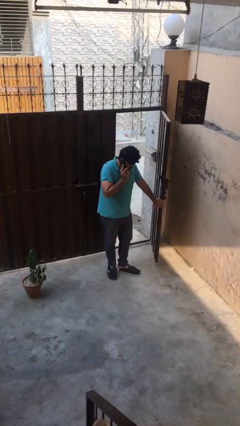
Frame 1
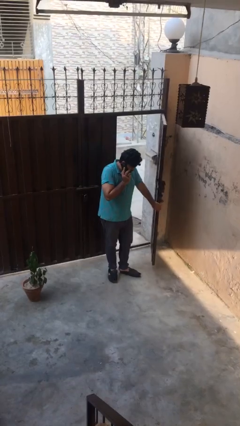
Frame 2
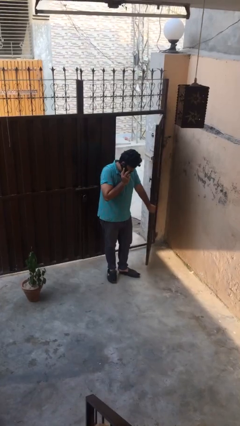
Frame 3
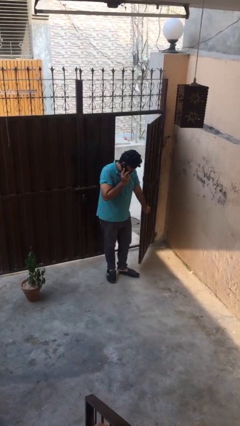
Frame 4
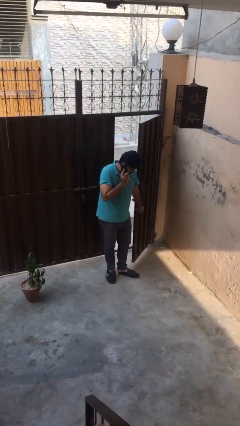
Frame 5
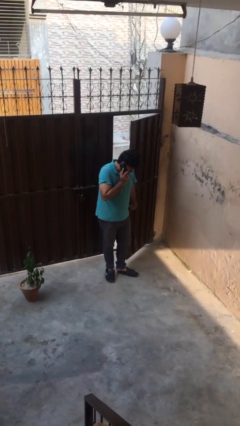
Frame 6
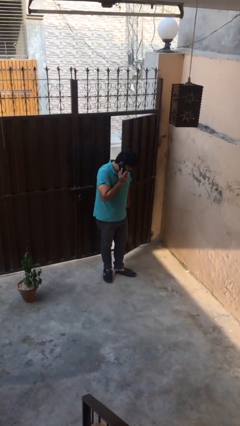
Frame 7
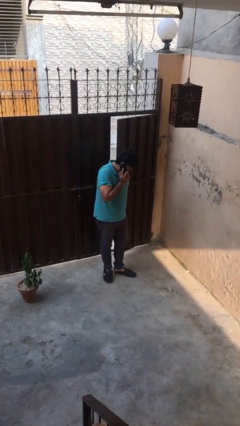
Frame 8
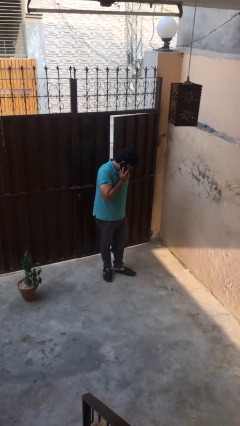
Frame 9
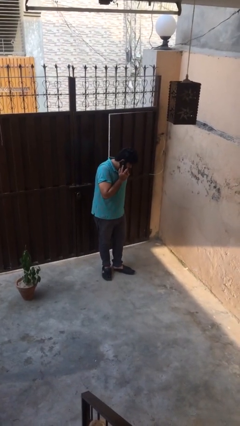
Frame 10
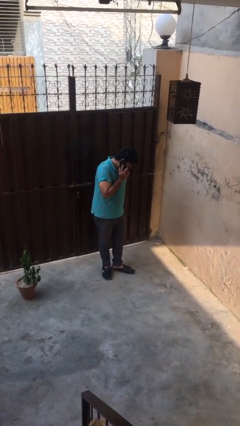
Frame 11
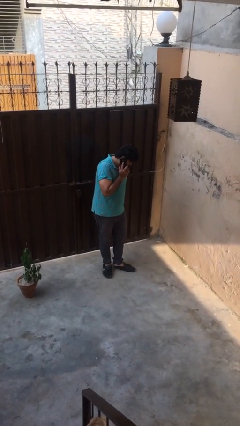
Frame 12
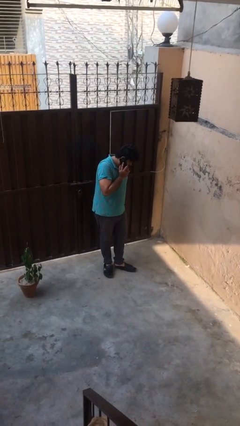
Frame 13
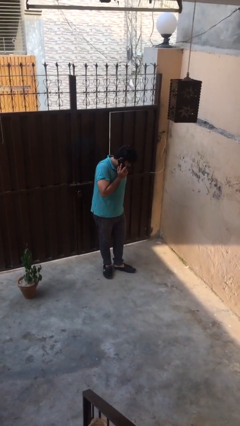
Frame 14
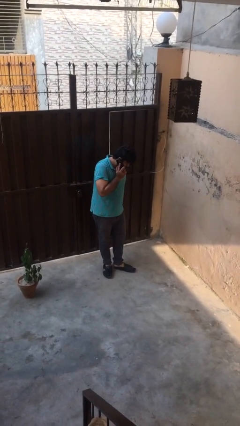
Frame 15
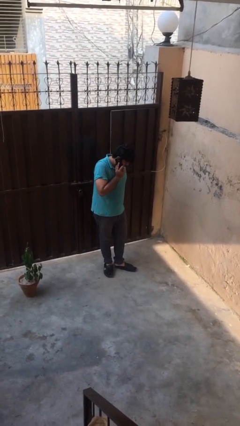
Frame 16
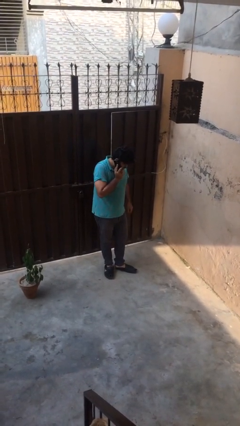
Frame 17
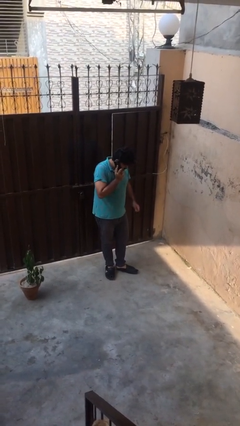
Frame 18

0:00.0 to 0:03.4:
person closes facility door

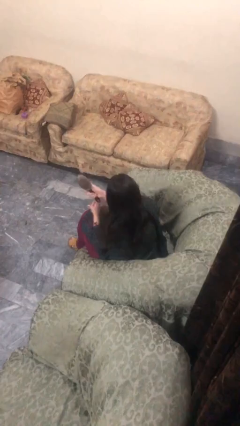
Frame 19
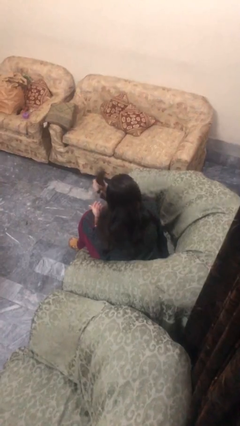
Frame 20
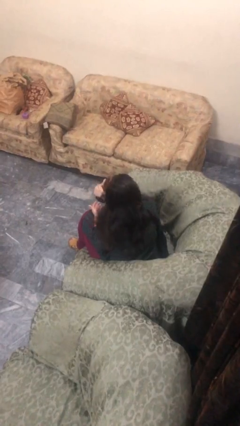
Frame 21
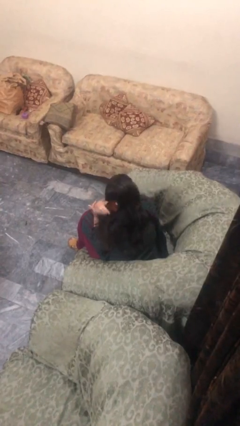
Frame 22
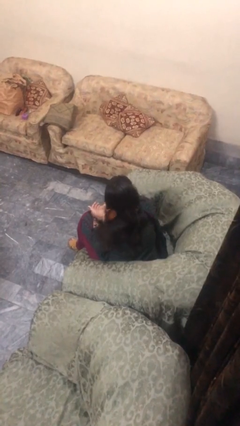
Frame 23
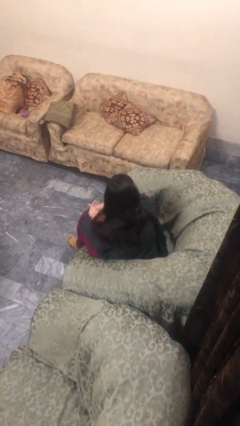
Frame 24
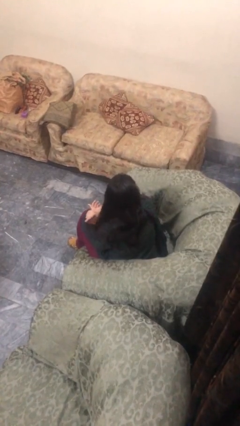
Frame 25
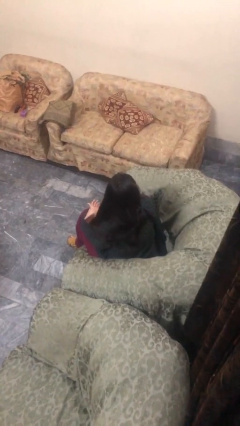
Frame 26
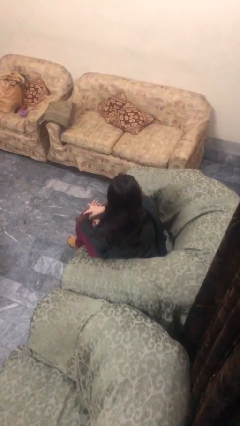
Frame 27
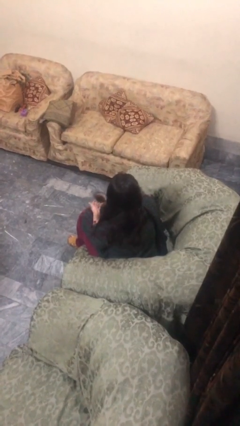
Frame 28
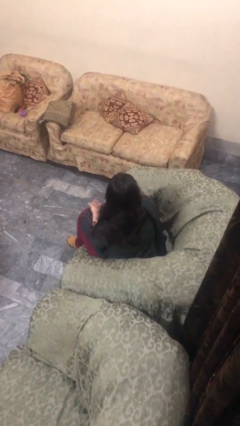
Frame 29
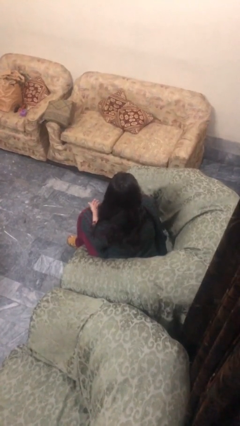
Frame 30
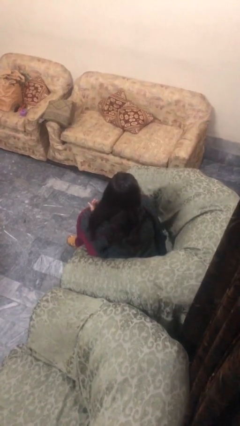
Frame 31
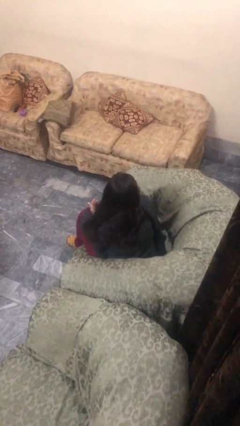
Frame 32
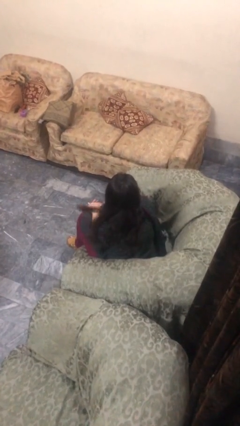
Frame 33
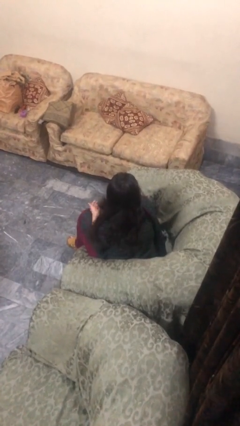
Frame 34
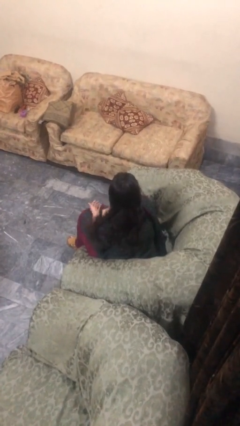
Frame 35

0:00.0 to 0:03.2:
person brushes hair

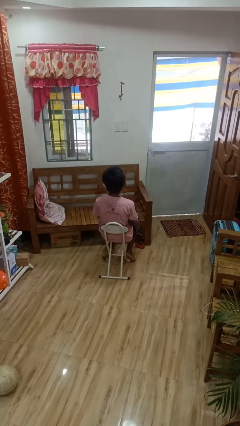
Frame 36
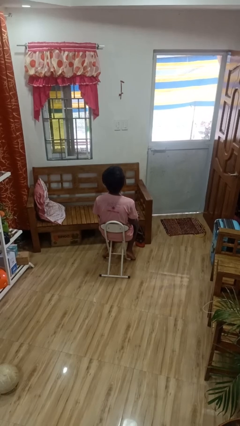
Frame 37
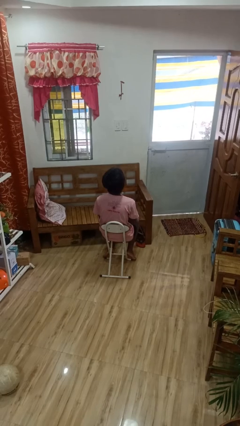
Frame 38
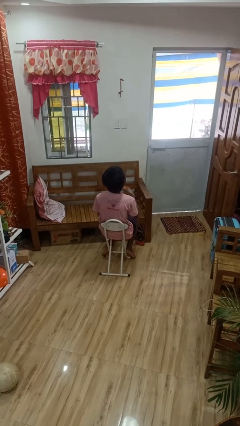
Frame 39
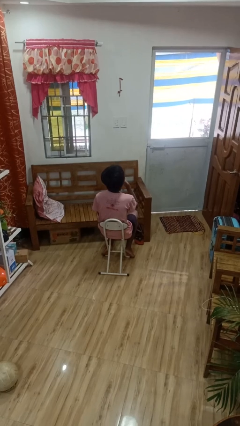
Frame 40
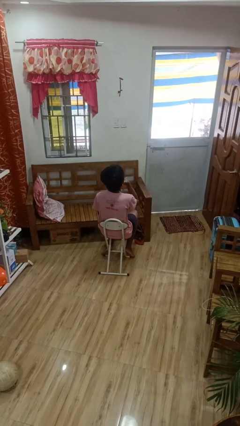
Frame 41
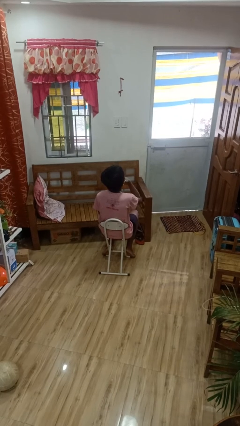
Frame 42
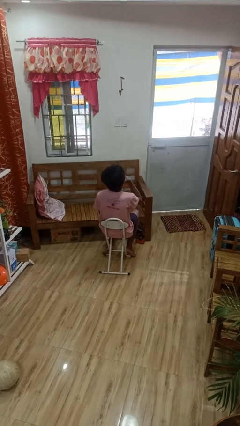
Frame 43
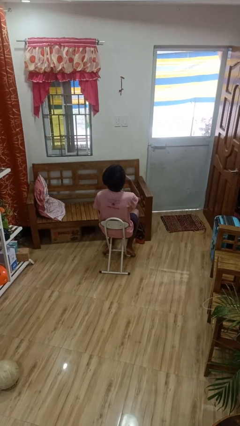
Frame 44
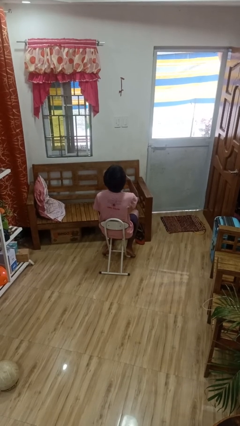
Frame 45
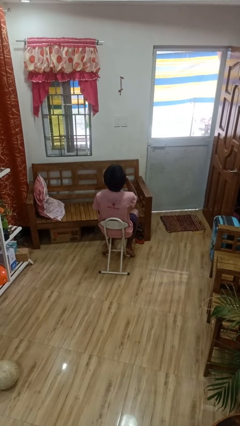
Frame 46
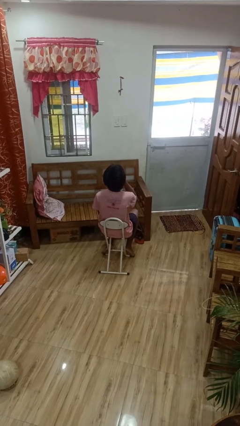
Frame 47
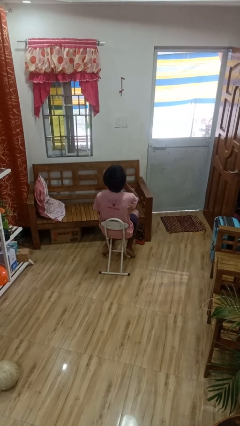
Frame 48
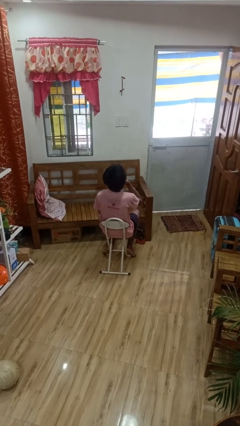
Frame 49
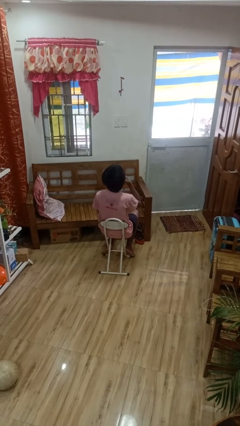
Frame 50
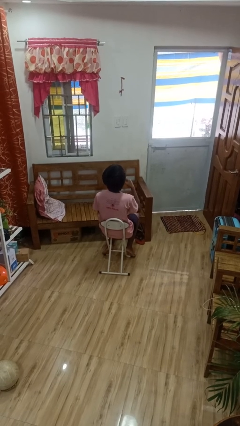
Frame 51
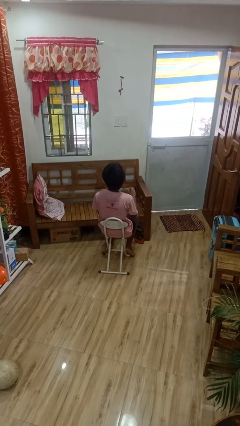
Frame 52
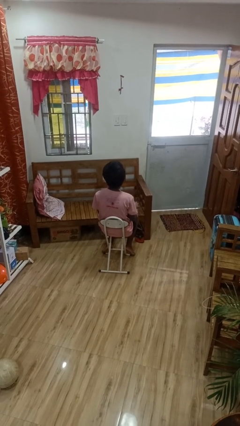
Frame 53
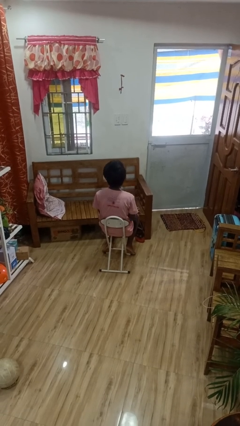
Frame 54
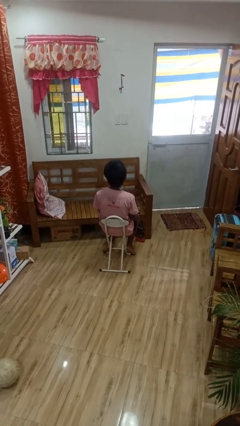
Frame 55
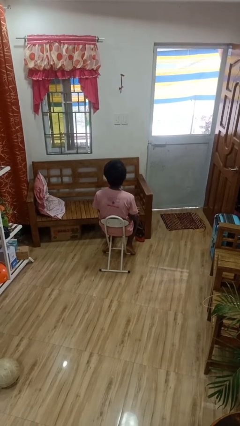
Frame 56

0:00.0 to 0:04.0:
person strokes chin

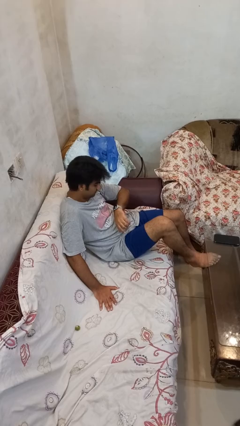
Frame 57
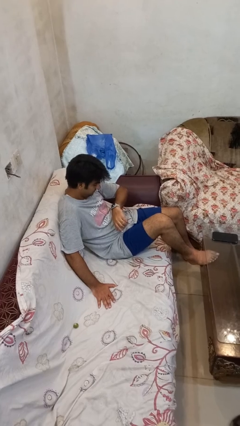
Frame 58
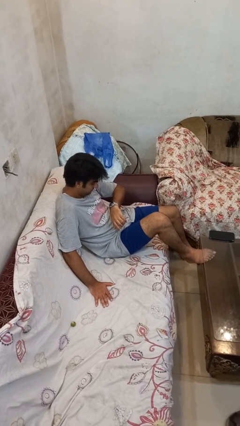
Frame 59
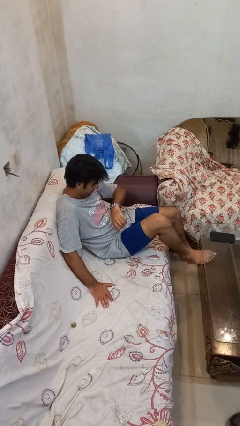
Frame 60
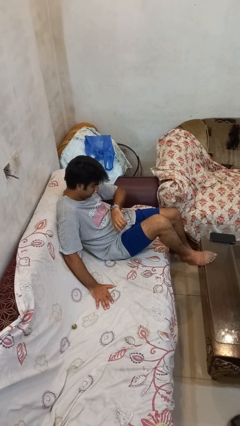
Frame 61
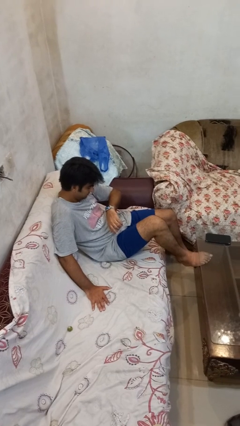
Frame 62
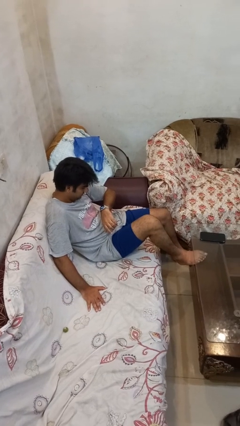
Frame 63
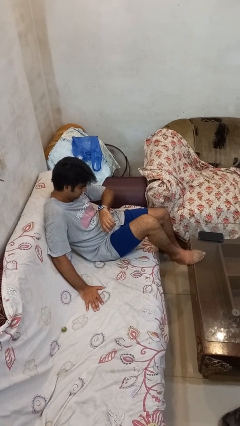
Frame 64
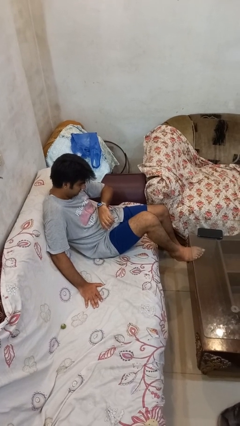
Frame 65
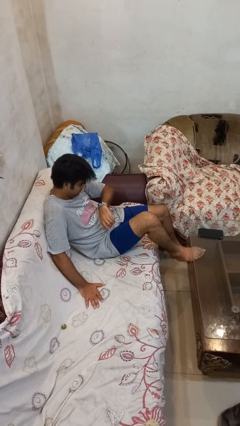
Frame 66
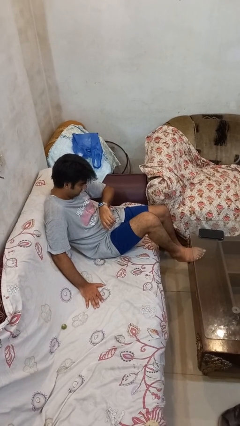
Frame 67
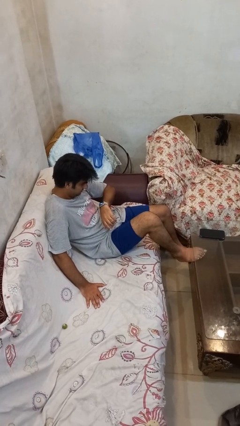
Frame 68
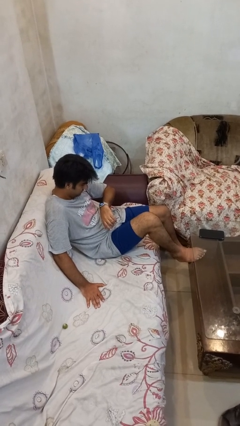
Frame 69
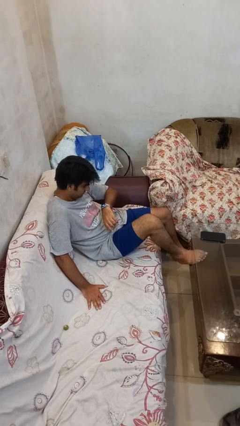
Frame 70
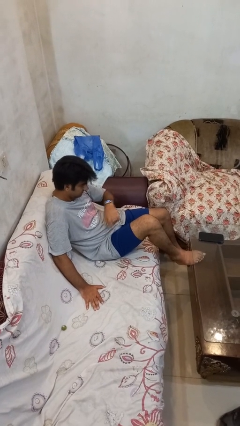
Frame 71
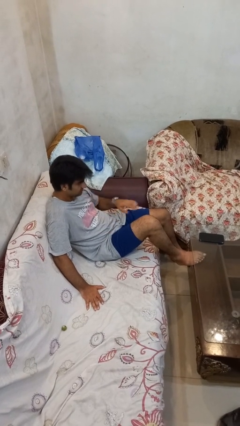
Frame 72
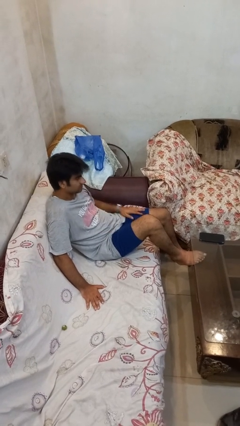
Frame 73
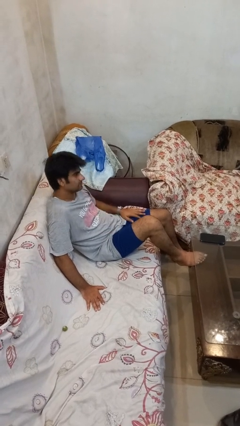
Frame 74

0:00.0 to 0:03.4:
person looks at wristwatch

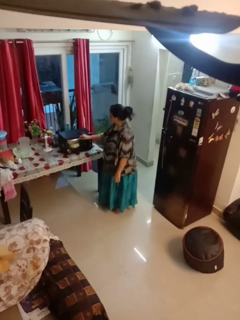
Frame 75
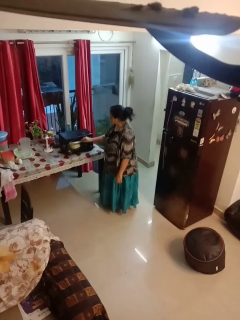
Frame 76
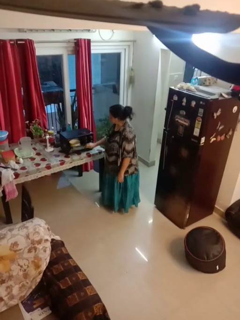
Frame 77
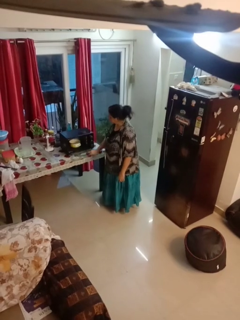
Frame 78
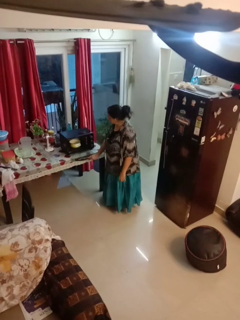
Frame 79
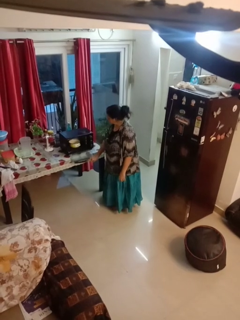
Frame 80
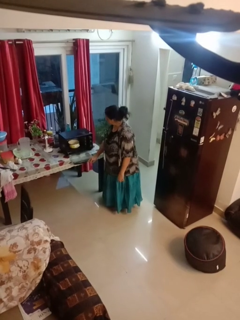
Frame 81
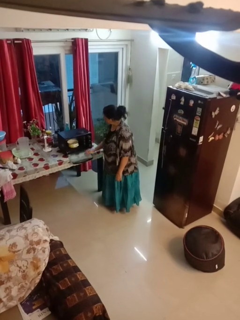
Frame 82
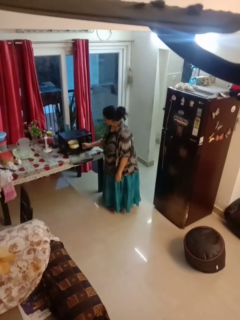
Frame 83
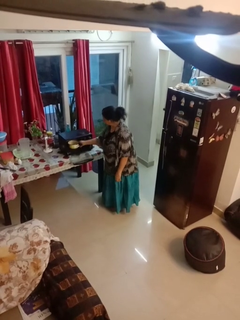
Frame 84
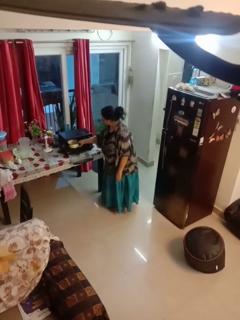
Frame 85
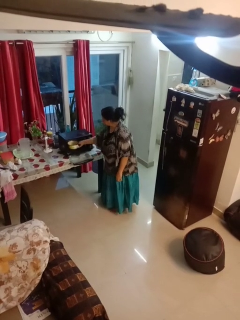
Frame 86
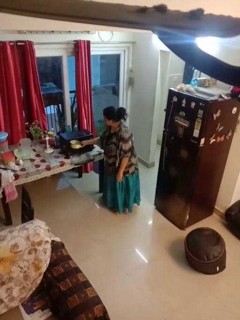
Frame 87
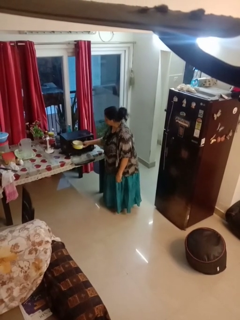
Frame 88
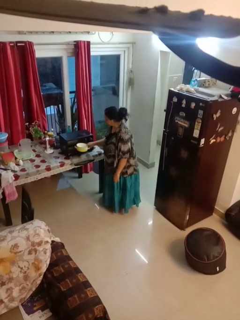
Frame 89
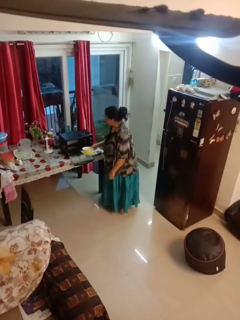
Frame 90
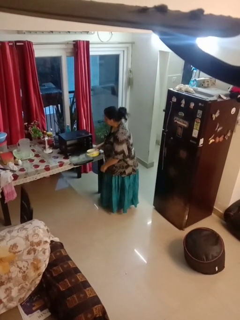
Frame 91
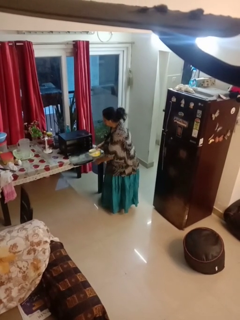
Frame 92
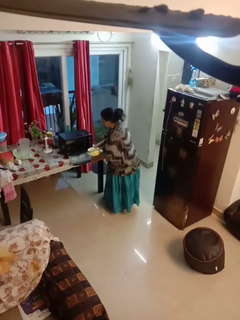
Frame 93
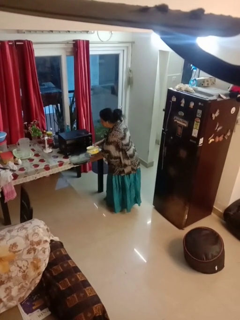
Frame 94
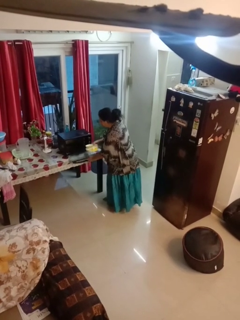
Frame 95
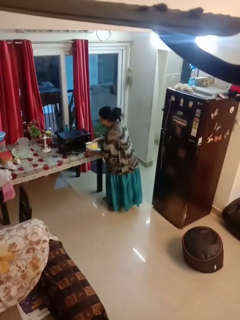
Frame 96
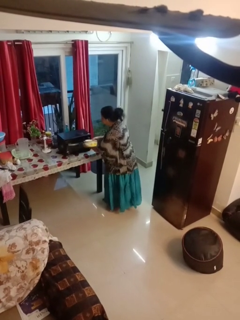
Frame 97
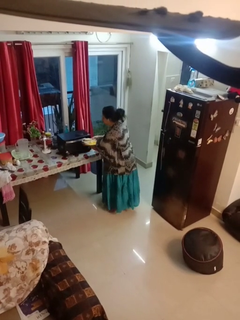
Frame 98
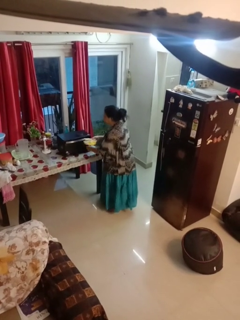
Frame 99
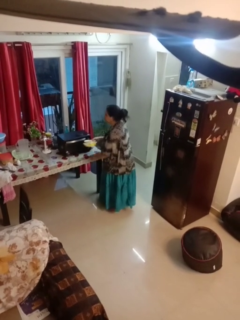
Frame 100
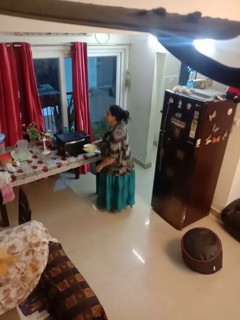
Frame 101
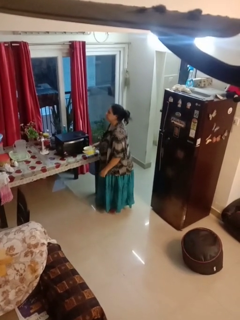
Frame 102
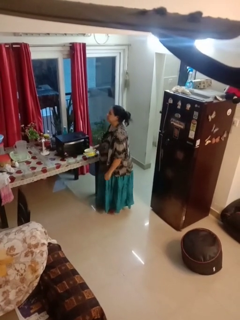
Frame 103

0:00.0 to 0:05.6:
person takes object from microwave
